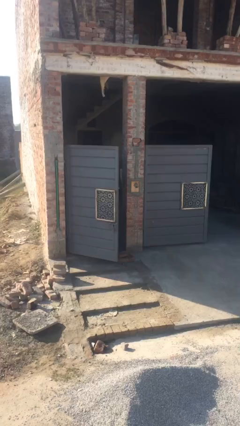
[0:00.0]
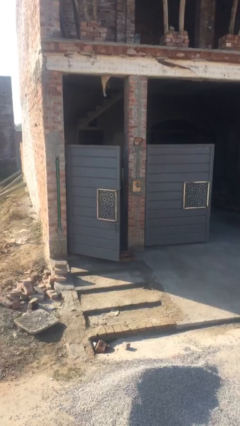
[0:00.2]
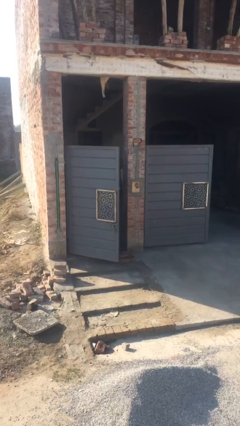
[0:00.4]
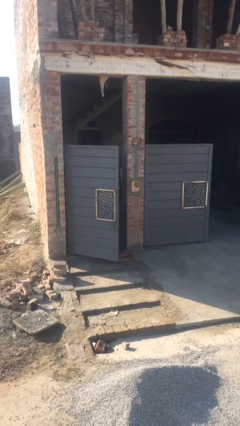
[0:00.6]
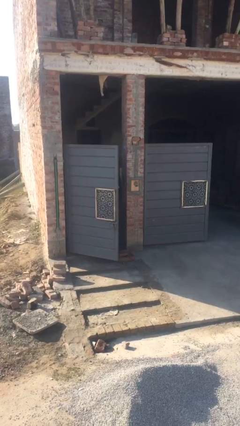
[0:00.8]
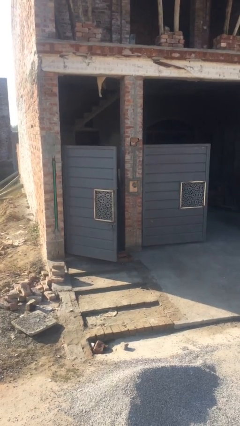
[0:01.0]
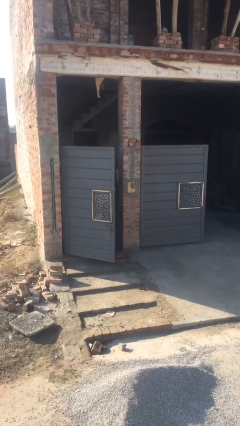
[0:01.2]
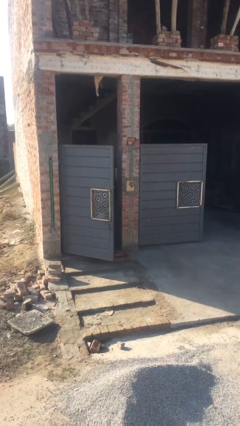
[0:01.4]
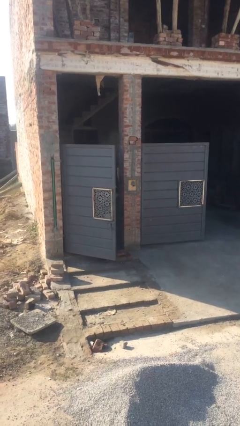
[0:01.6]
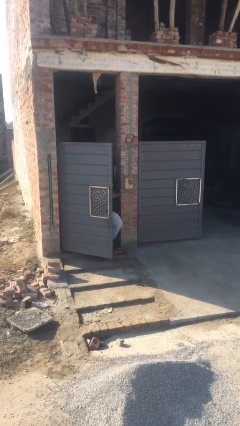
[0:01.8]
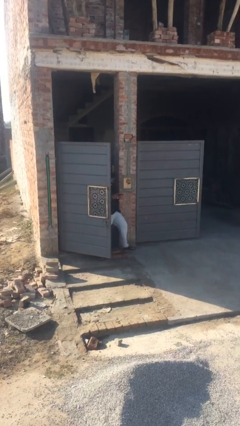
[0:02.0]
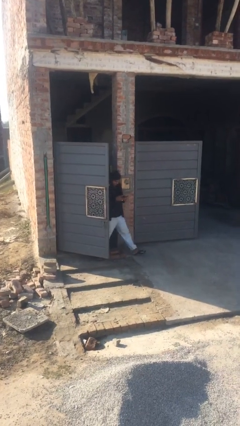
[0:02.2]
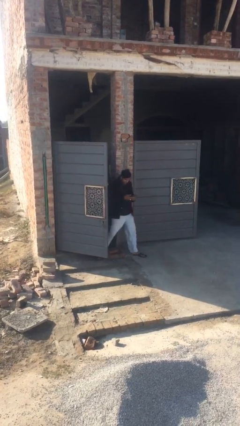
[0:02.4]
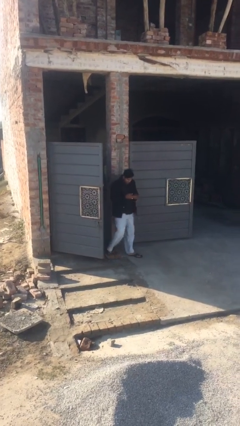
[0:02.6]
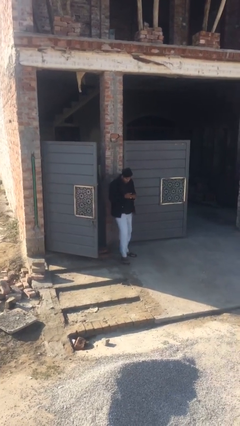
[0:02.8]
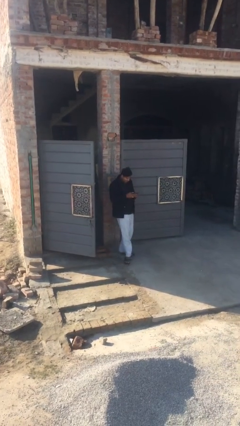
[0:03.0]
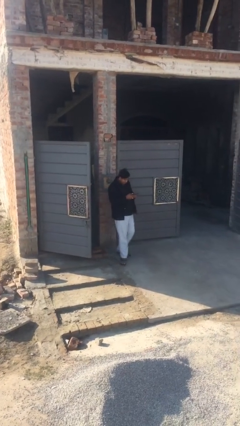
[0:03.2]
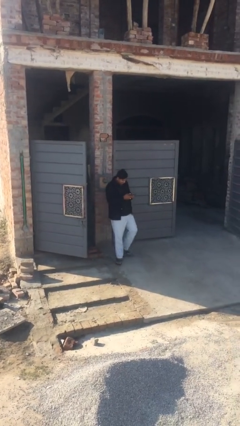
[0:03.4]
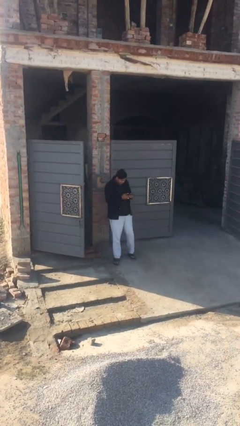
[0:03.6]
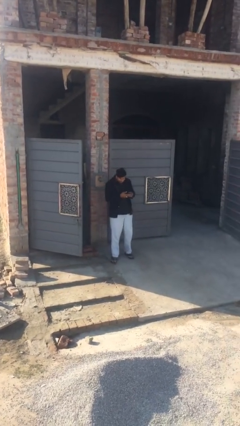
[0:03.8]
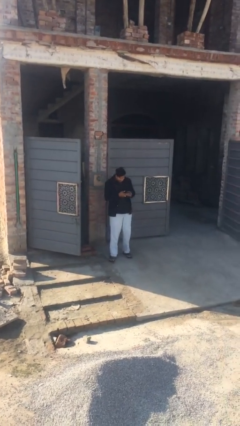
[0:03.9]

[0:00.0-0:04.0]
person enters scene through structure

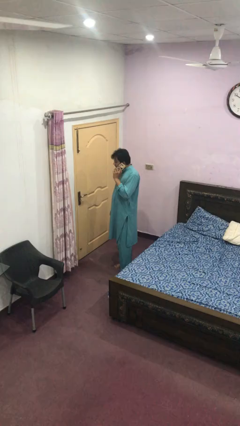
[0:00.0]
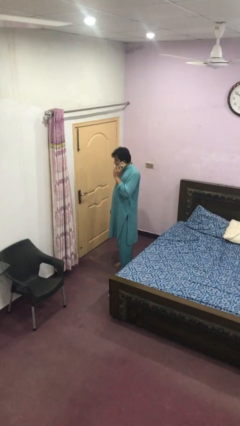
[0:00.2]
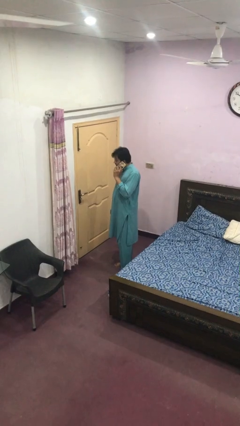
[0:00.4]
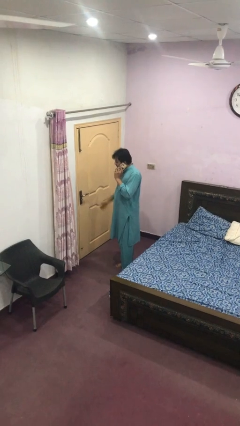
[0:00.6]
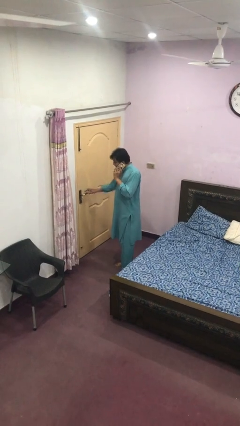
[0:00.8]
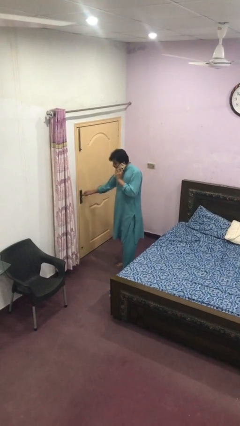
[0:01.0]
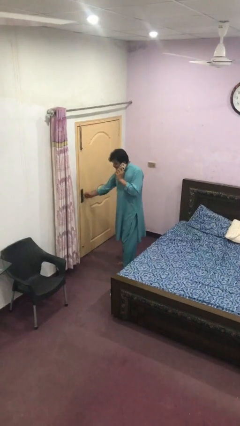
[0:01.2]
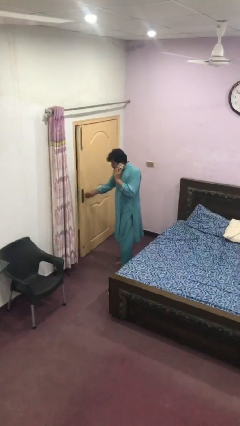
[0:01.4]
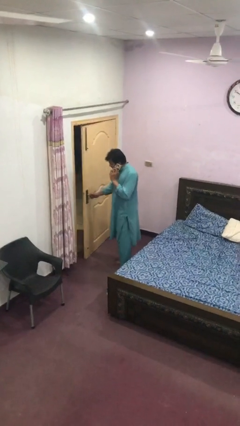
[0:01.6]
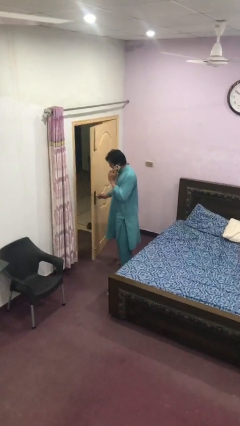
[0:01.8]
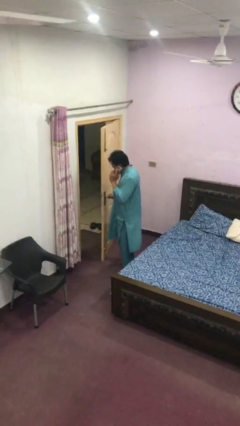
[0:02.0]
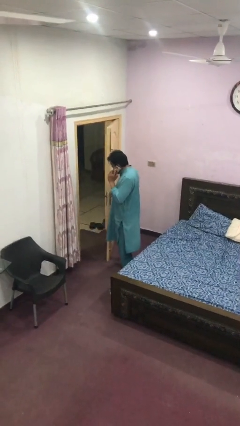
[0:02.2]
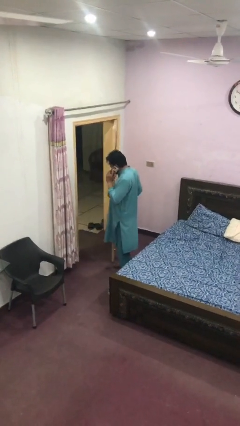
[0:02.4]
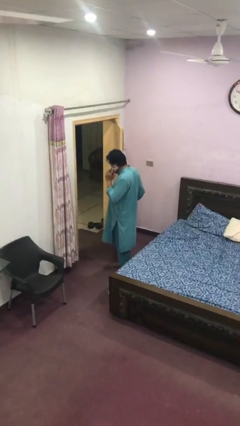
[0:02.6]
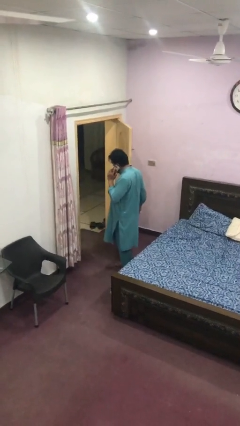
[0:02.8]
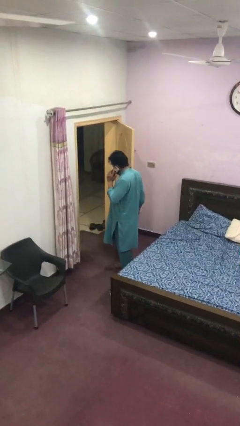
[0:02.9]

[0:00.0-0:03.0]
person opens facility door

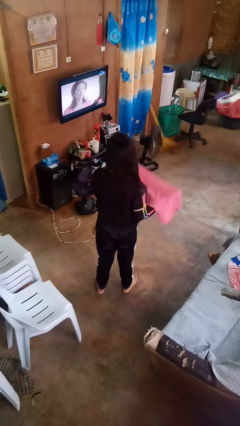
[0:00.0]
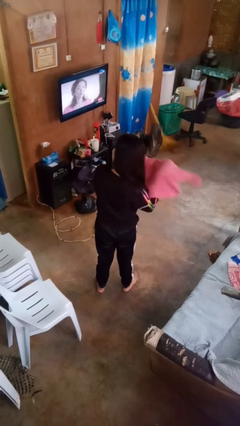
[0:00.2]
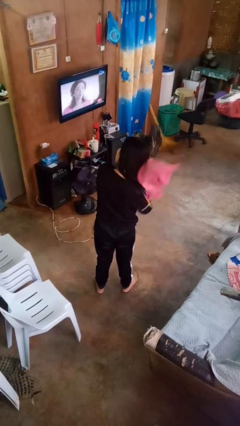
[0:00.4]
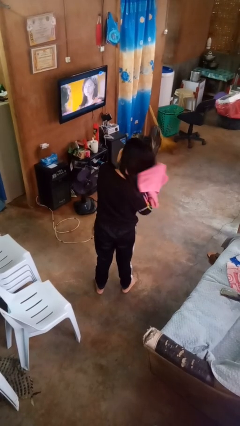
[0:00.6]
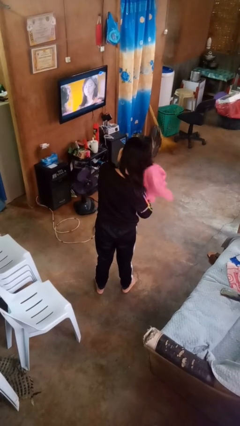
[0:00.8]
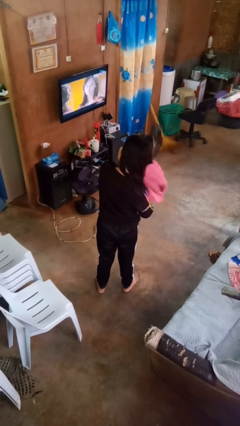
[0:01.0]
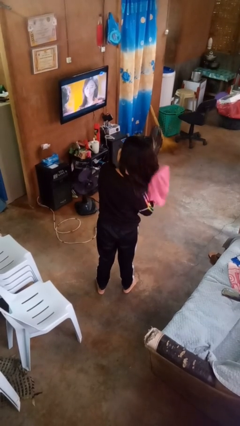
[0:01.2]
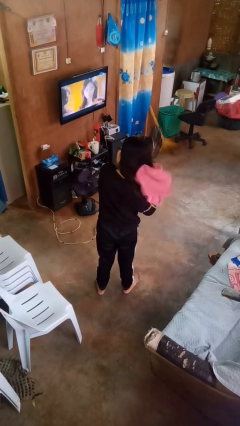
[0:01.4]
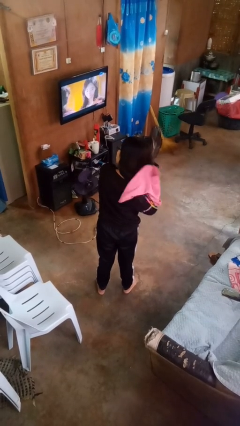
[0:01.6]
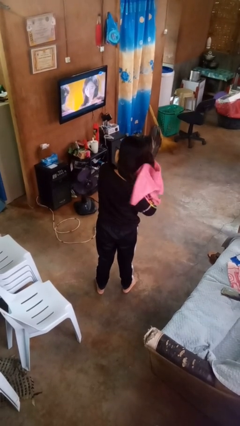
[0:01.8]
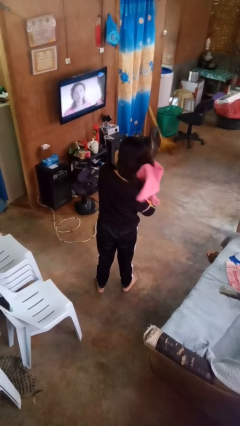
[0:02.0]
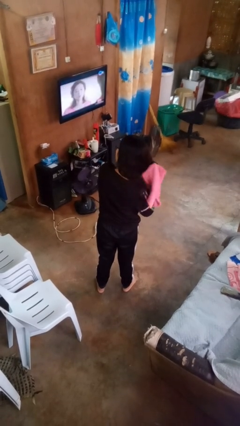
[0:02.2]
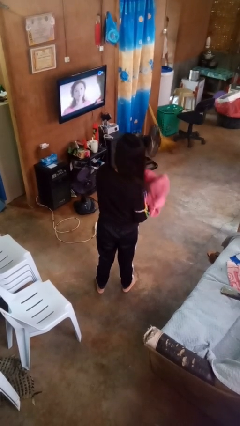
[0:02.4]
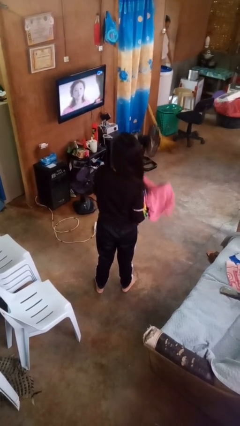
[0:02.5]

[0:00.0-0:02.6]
person dries hair with towel

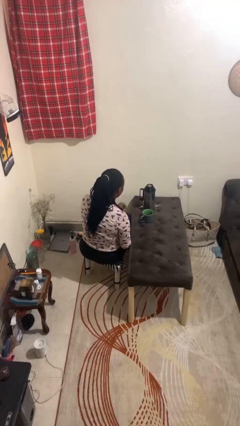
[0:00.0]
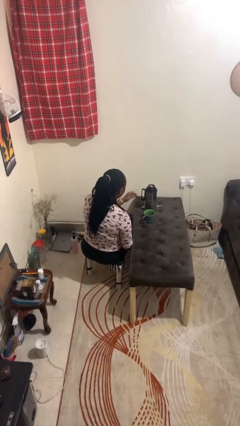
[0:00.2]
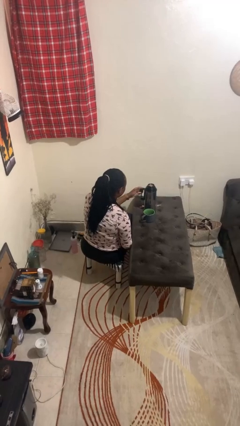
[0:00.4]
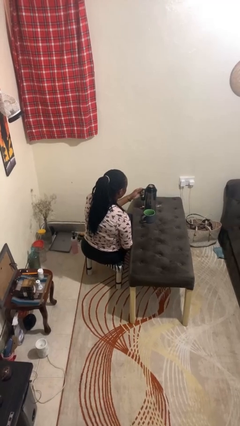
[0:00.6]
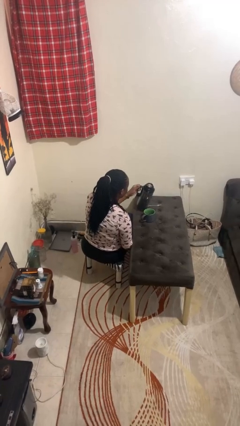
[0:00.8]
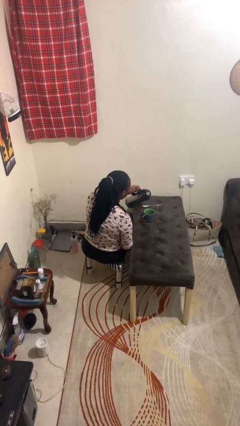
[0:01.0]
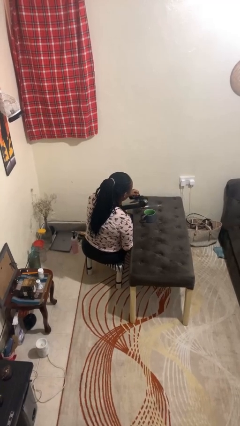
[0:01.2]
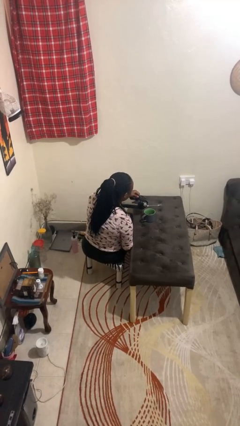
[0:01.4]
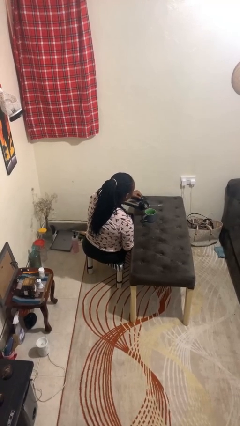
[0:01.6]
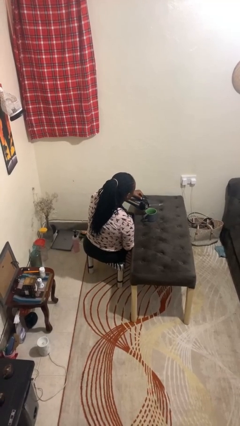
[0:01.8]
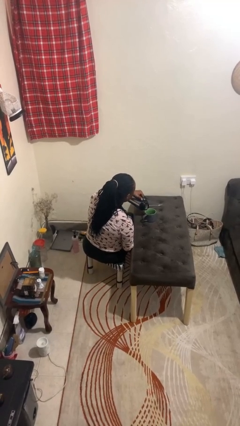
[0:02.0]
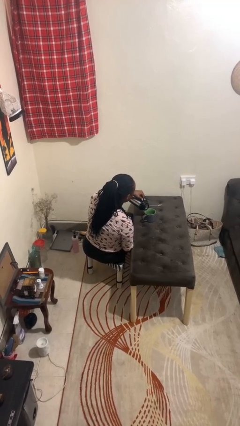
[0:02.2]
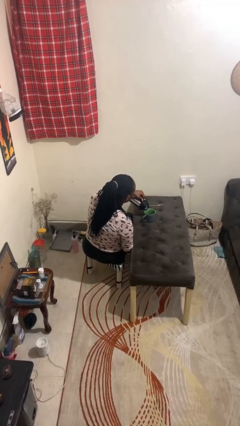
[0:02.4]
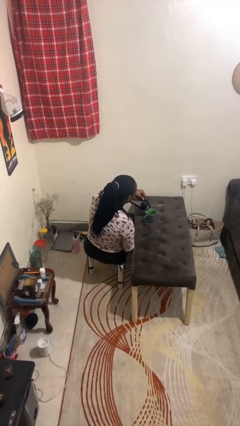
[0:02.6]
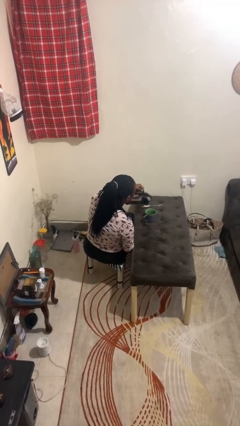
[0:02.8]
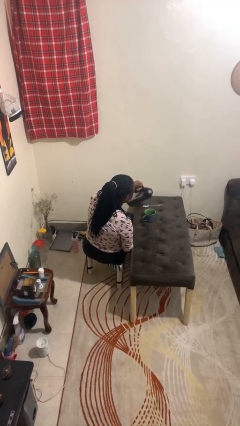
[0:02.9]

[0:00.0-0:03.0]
person pours coffee into mug

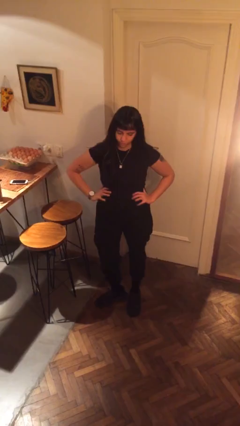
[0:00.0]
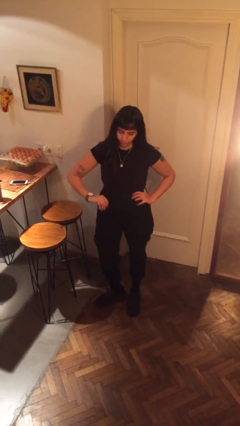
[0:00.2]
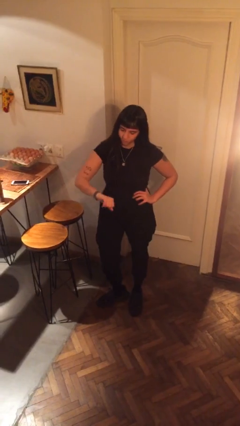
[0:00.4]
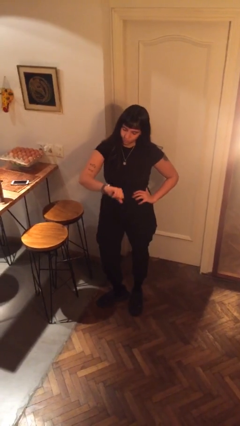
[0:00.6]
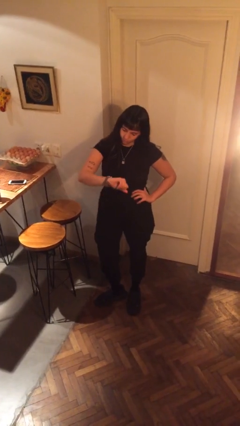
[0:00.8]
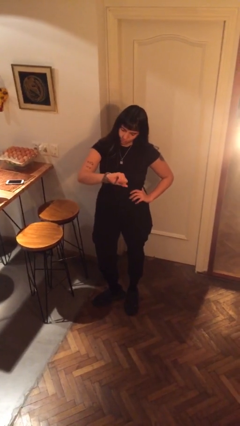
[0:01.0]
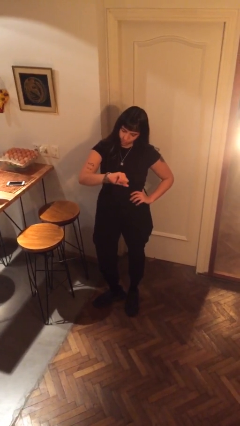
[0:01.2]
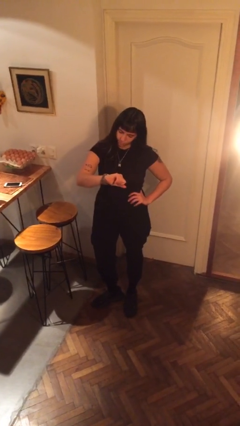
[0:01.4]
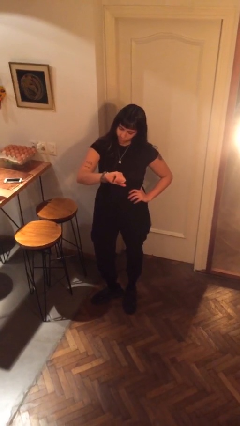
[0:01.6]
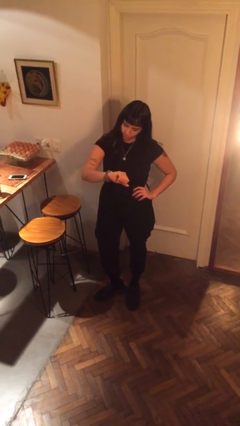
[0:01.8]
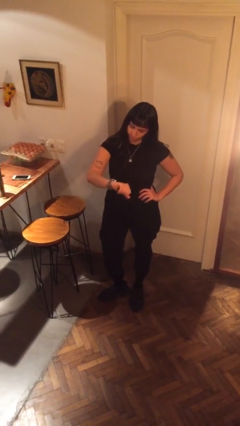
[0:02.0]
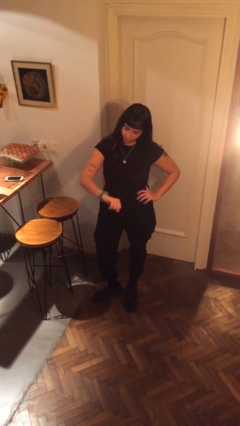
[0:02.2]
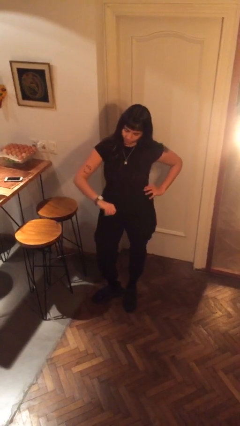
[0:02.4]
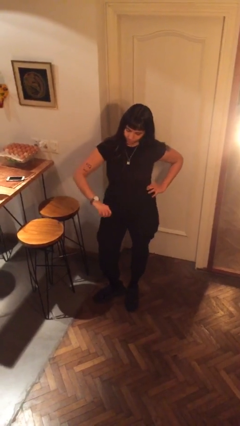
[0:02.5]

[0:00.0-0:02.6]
person looks at wristwatch

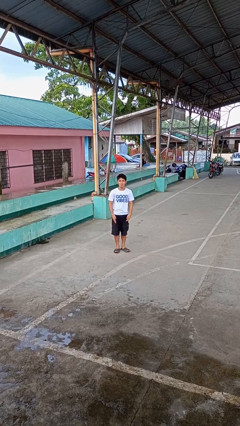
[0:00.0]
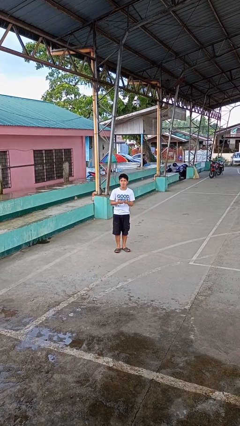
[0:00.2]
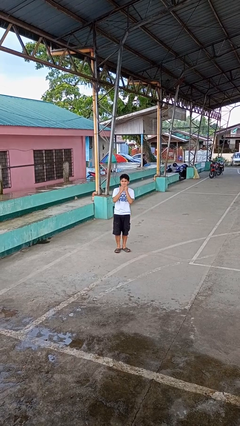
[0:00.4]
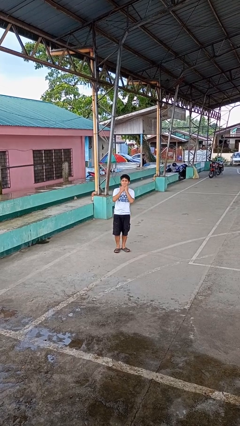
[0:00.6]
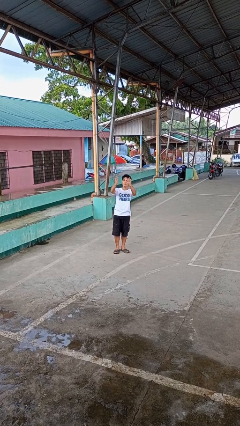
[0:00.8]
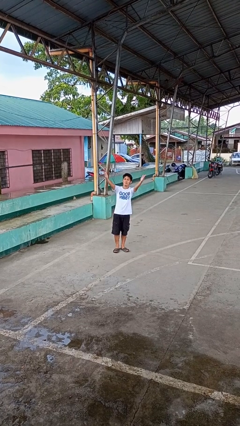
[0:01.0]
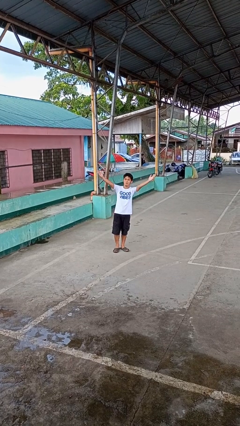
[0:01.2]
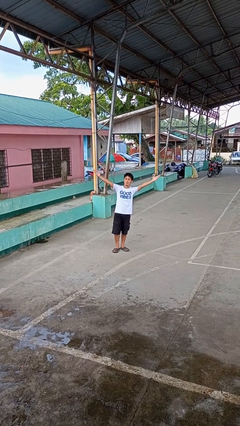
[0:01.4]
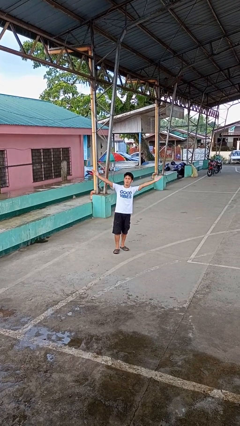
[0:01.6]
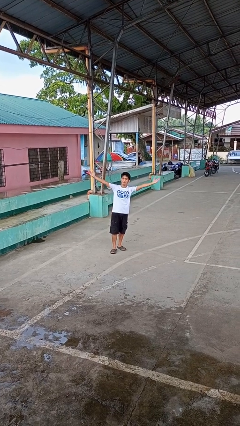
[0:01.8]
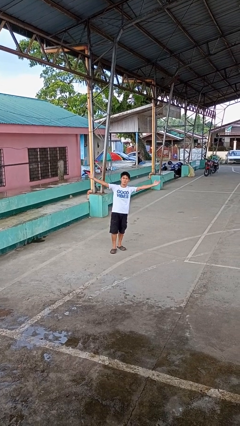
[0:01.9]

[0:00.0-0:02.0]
person gestures blow kiss

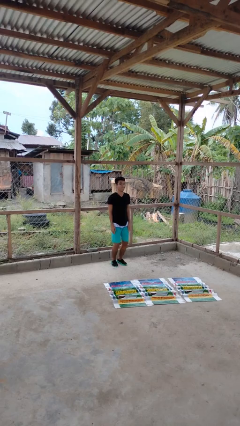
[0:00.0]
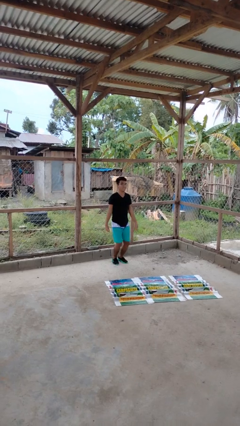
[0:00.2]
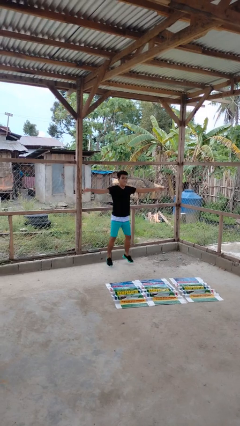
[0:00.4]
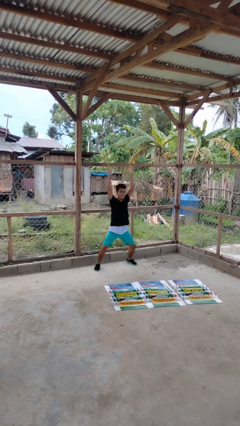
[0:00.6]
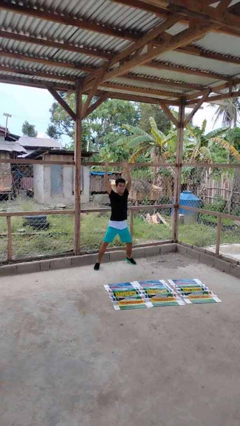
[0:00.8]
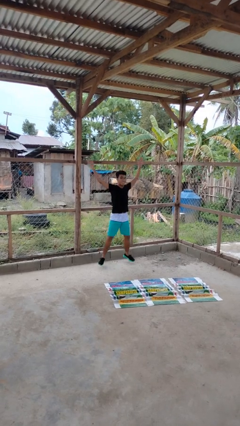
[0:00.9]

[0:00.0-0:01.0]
person exercises with jumping jacks
